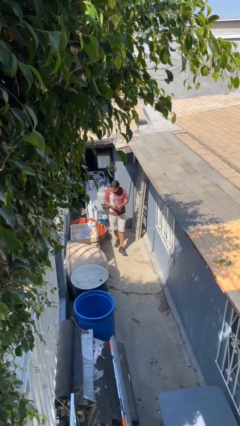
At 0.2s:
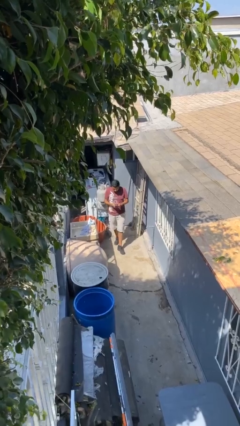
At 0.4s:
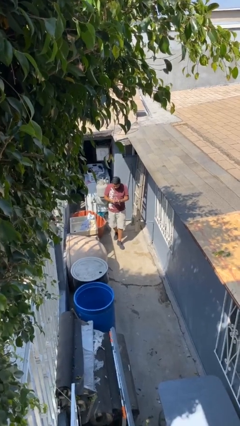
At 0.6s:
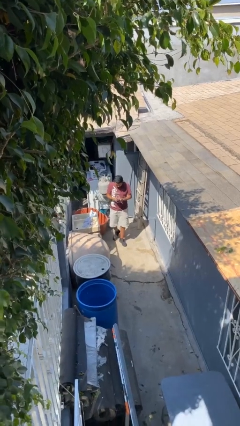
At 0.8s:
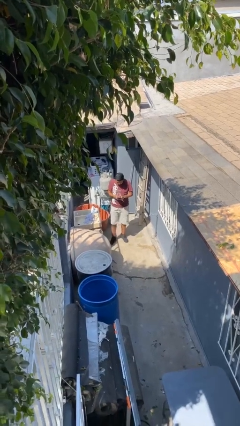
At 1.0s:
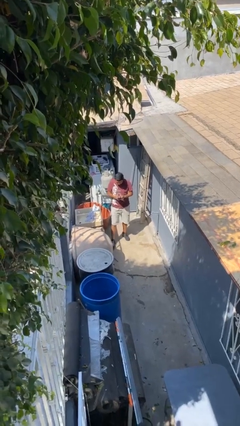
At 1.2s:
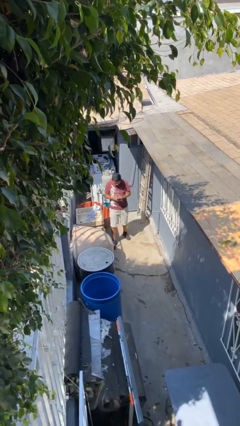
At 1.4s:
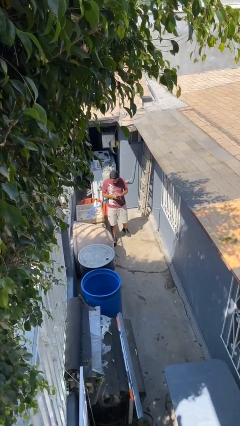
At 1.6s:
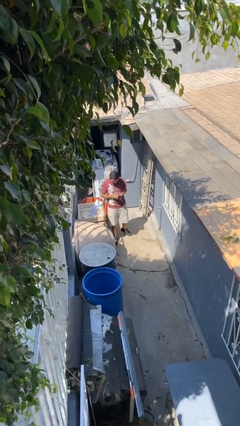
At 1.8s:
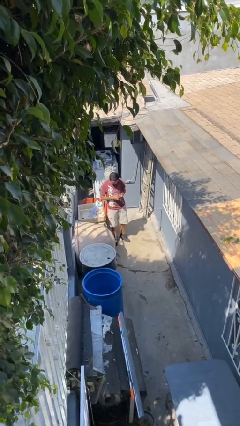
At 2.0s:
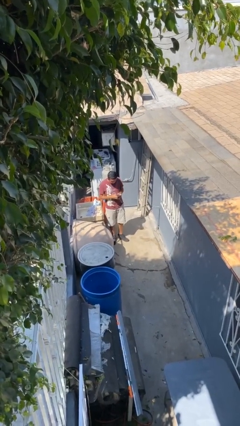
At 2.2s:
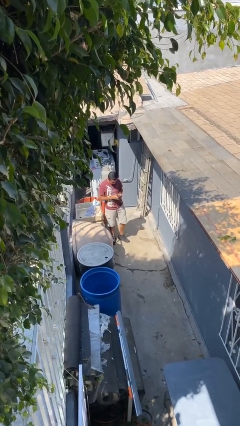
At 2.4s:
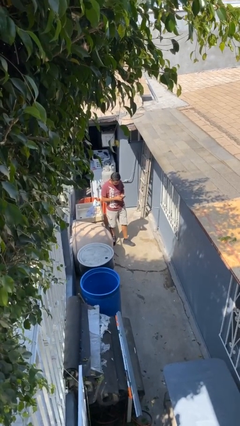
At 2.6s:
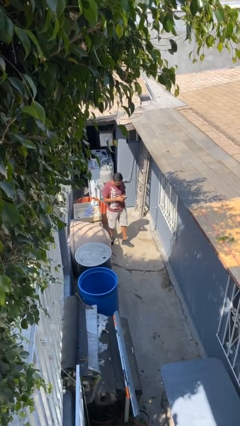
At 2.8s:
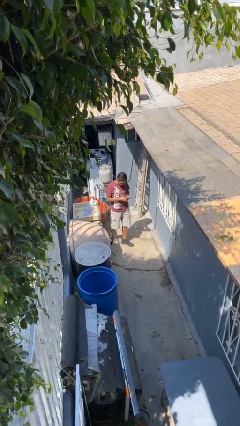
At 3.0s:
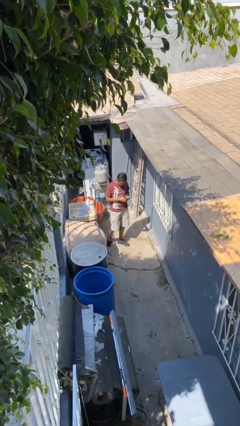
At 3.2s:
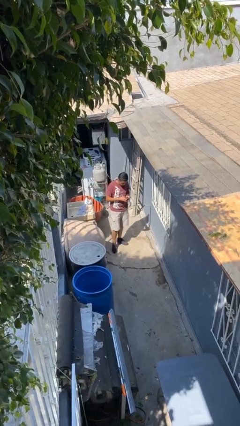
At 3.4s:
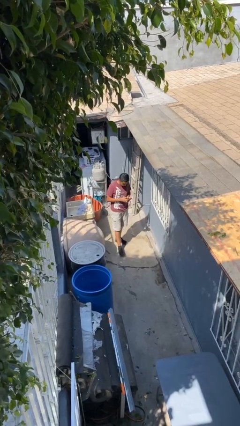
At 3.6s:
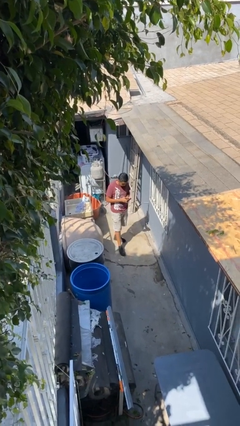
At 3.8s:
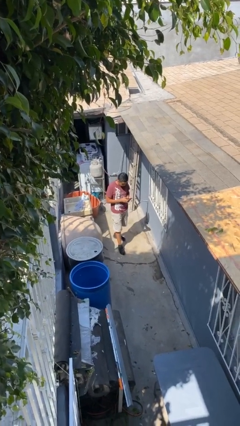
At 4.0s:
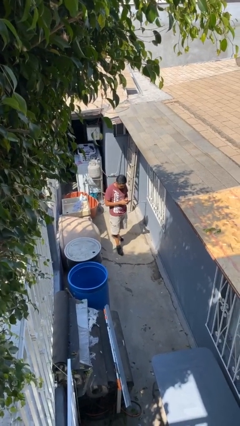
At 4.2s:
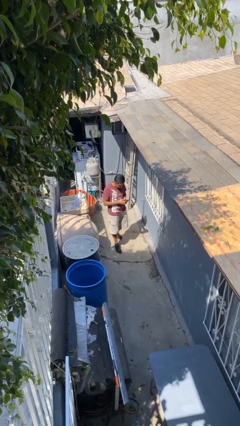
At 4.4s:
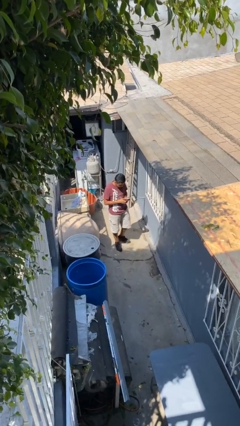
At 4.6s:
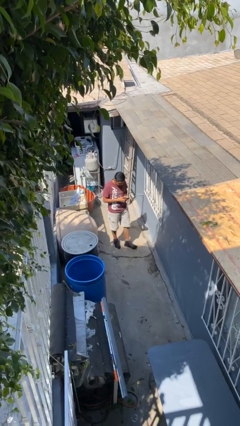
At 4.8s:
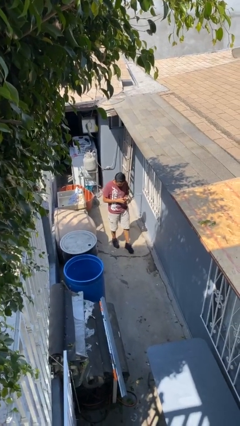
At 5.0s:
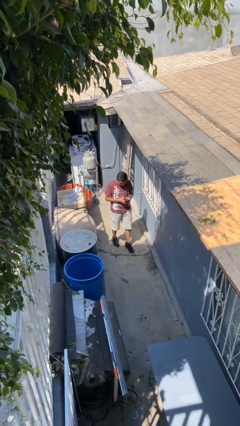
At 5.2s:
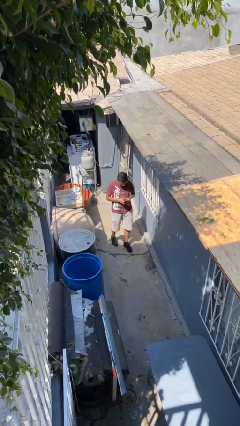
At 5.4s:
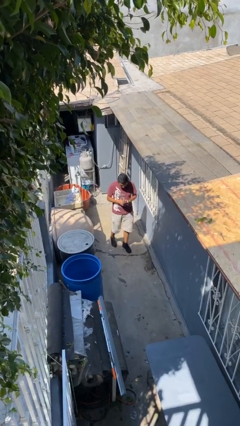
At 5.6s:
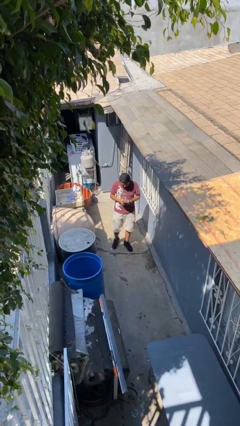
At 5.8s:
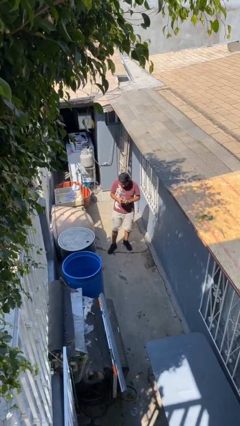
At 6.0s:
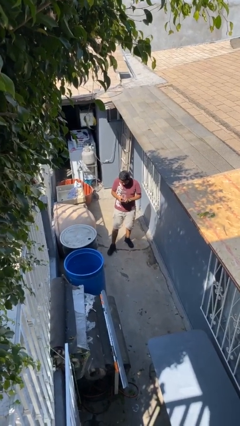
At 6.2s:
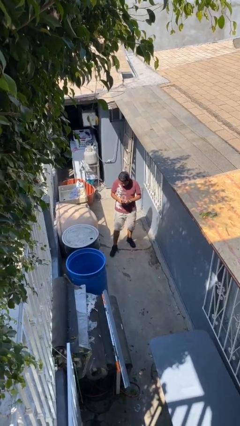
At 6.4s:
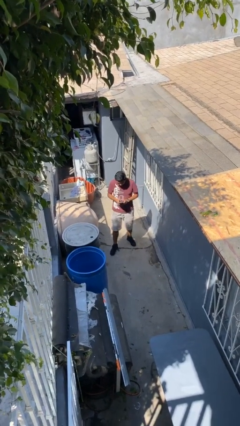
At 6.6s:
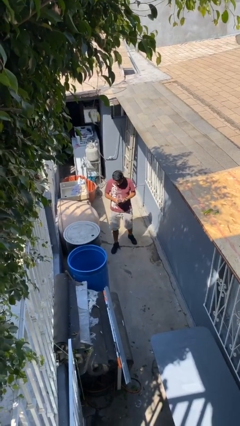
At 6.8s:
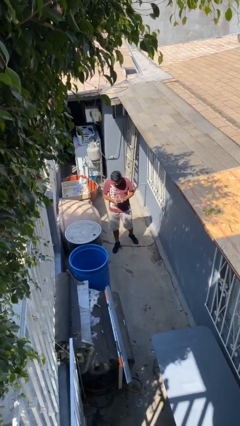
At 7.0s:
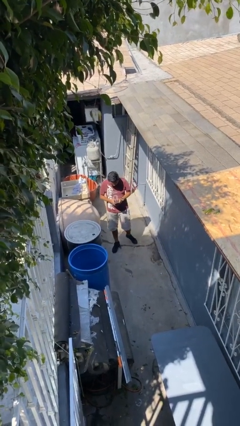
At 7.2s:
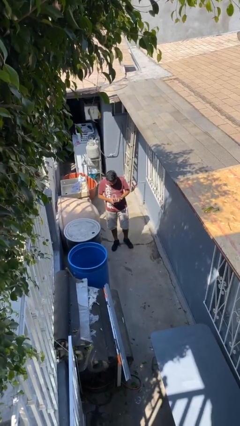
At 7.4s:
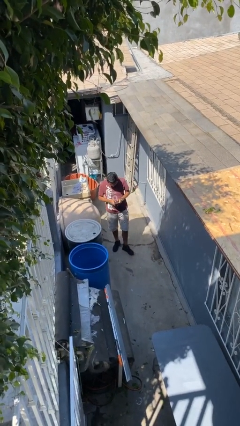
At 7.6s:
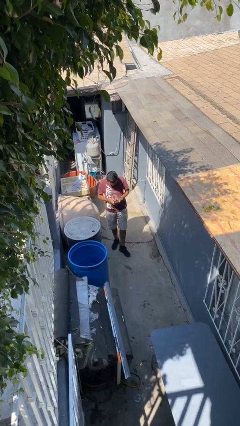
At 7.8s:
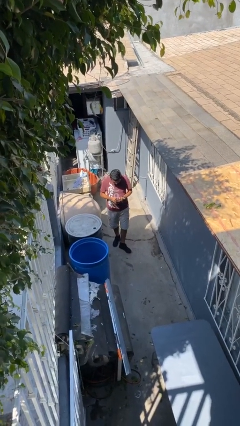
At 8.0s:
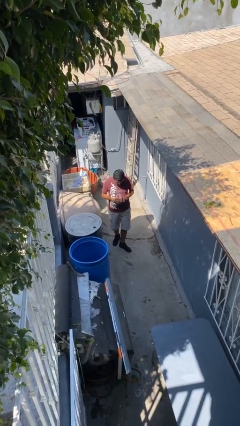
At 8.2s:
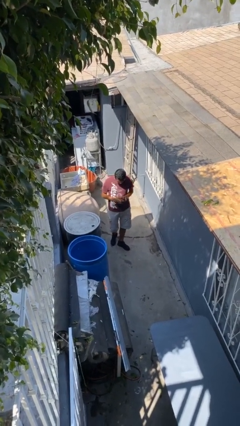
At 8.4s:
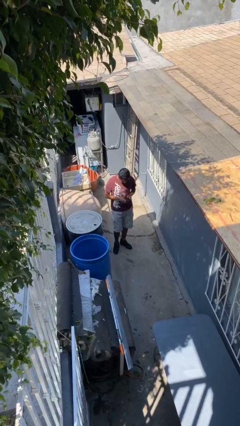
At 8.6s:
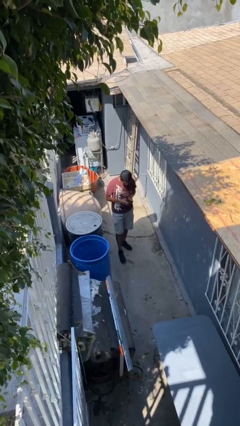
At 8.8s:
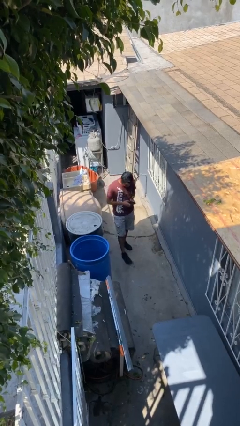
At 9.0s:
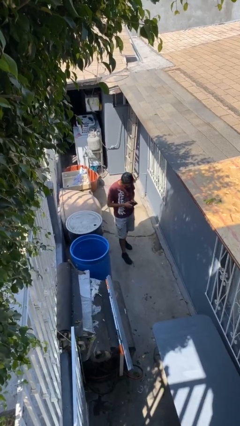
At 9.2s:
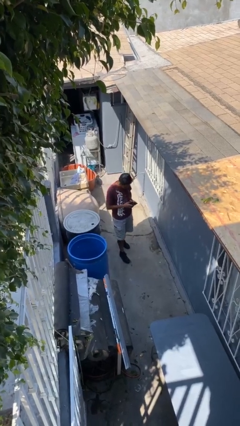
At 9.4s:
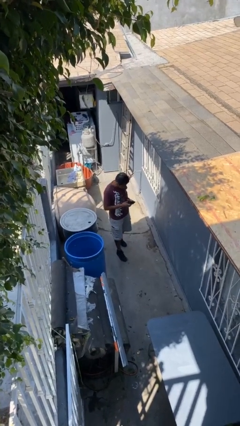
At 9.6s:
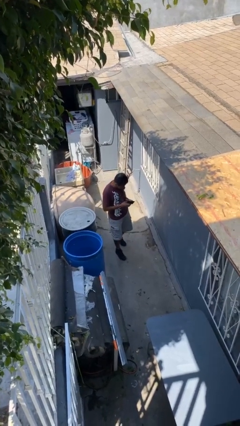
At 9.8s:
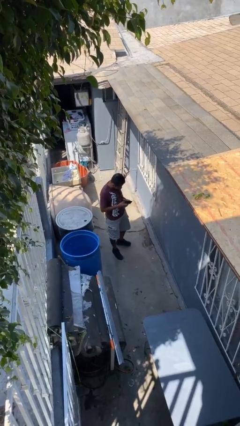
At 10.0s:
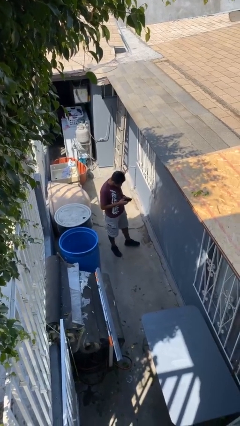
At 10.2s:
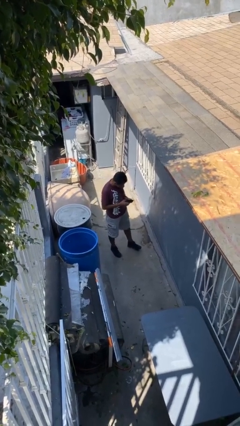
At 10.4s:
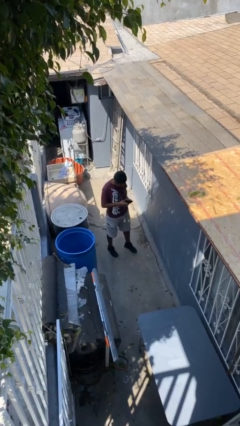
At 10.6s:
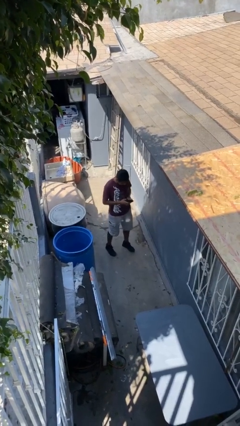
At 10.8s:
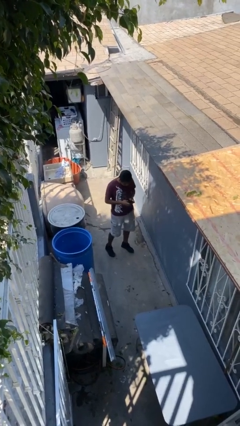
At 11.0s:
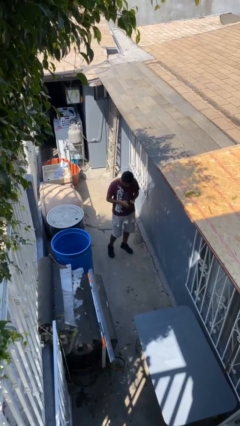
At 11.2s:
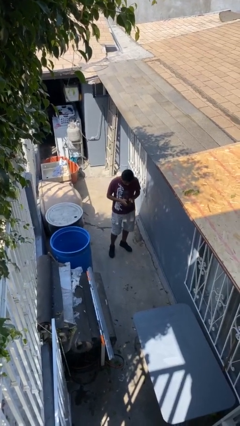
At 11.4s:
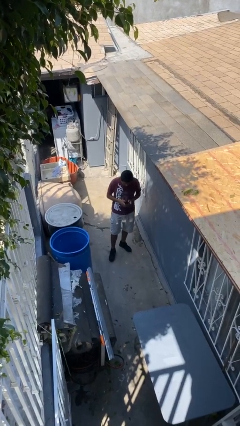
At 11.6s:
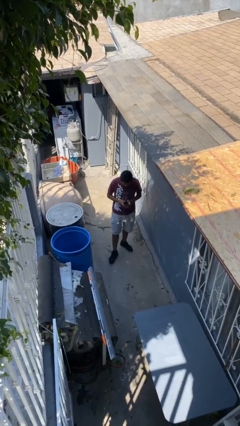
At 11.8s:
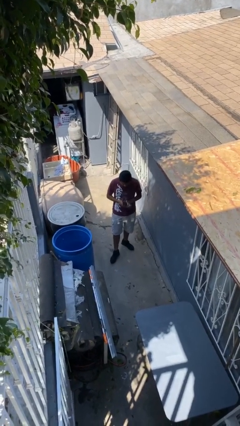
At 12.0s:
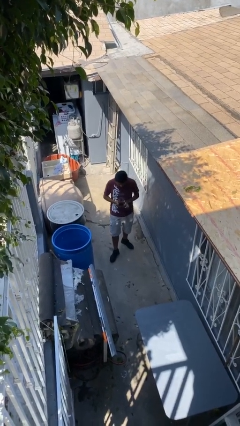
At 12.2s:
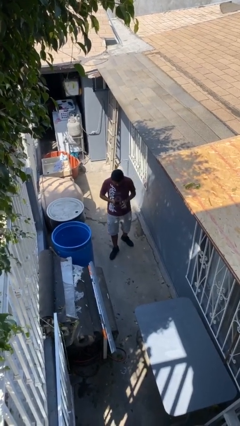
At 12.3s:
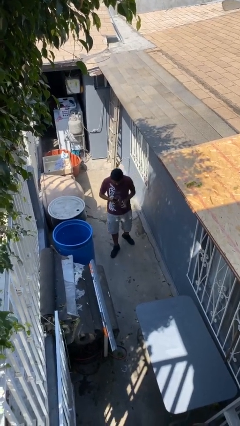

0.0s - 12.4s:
person texts on phone

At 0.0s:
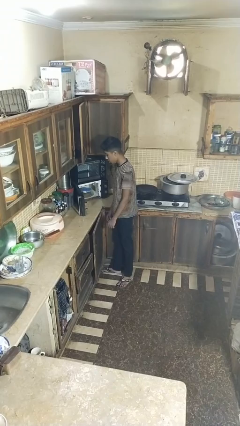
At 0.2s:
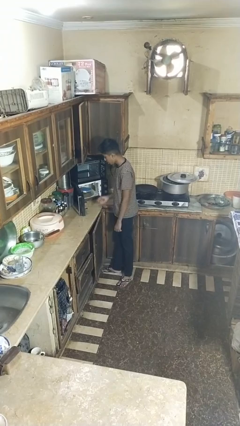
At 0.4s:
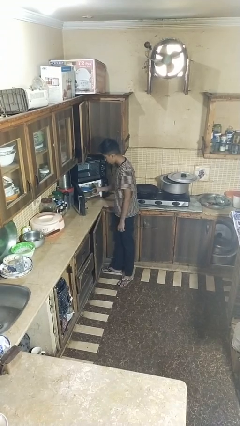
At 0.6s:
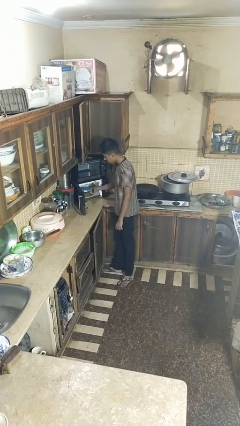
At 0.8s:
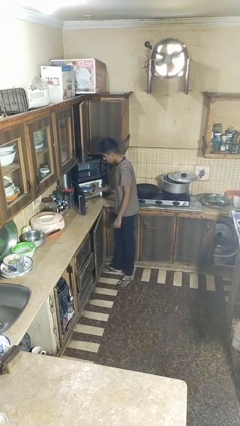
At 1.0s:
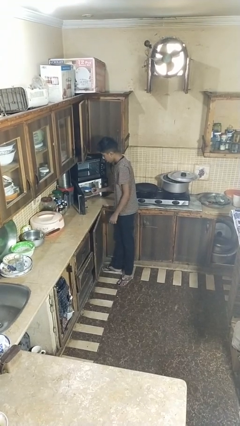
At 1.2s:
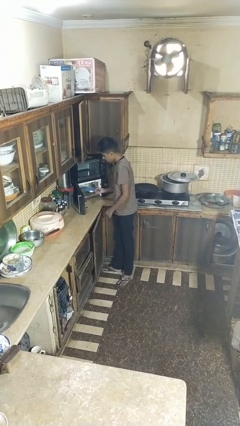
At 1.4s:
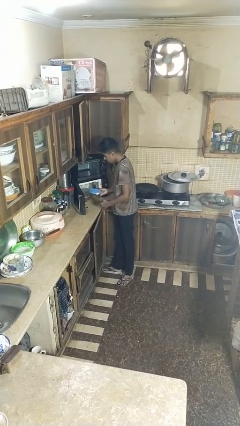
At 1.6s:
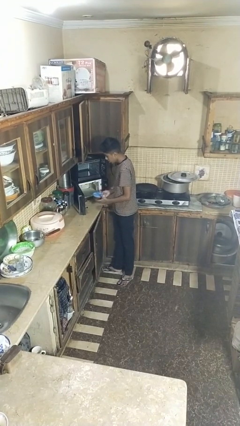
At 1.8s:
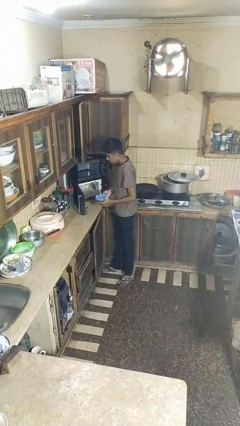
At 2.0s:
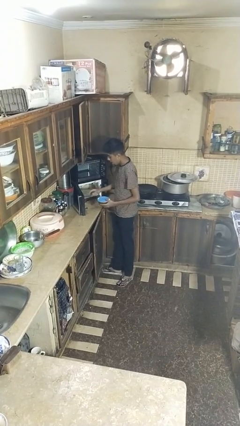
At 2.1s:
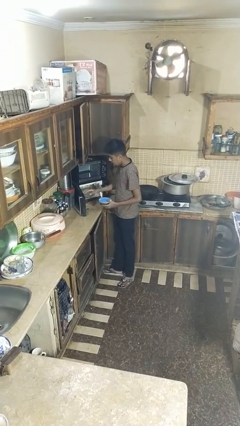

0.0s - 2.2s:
person takes object from microwave

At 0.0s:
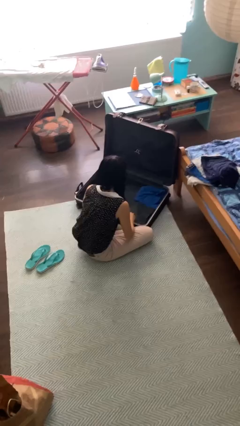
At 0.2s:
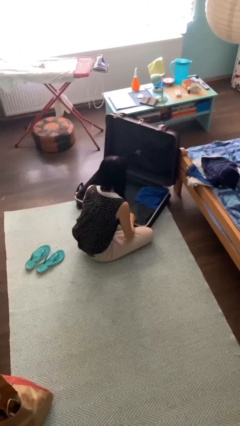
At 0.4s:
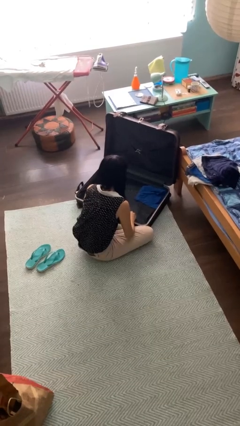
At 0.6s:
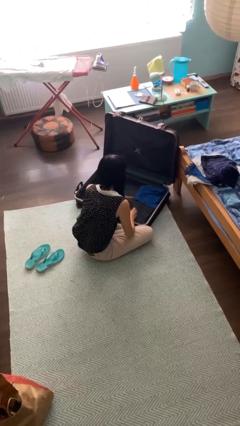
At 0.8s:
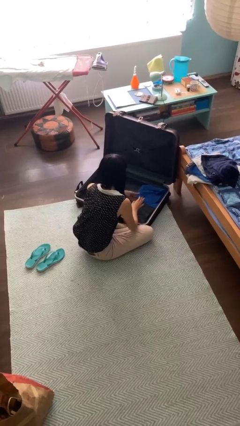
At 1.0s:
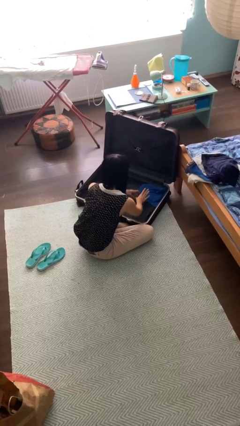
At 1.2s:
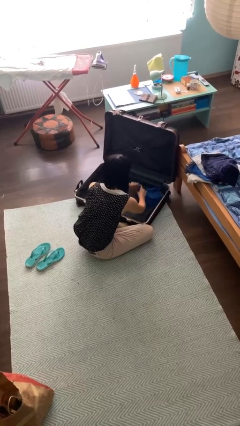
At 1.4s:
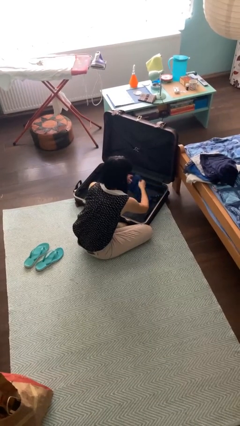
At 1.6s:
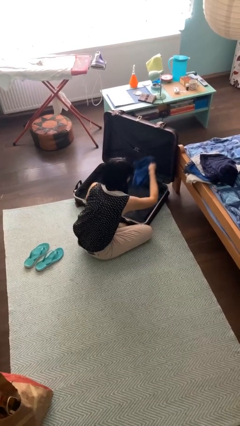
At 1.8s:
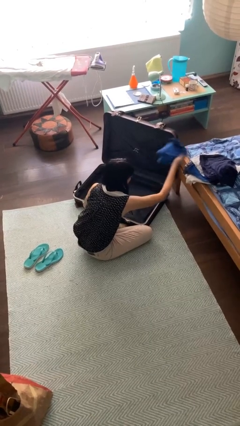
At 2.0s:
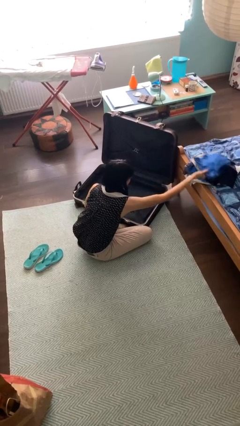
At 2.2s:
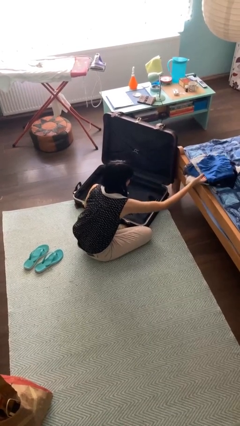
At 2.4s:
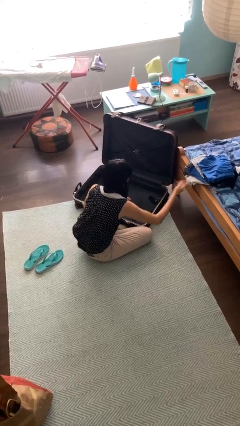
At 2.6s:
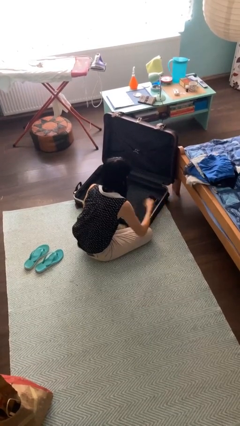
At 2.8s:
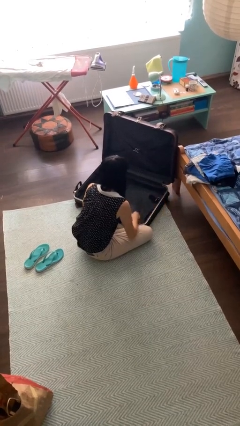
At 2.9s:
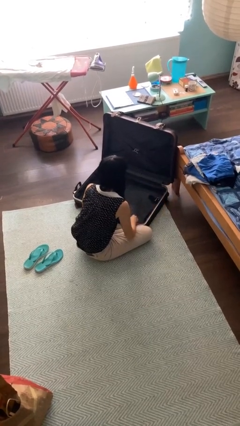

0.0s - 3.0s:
person unloads clothes from suitcase

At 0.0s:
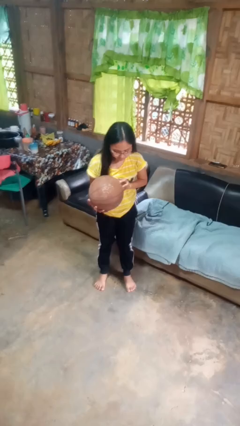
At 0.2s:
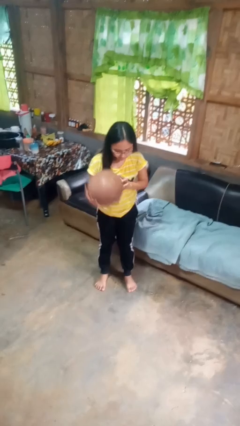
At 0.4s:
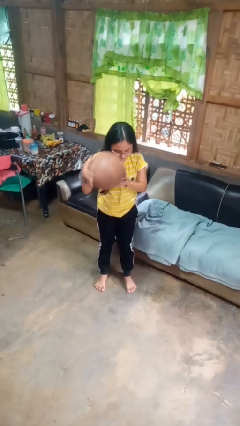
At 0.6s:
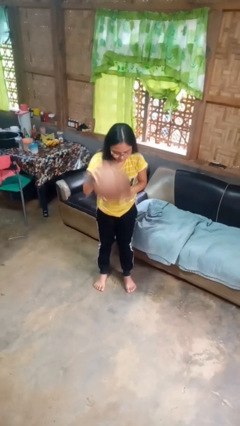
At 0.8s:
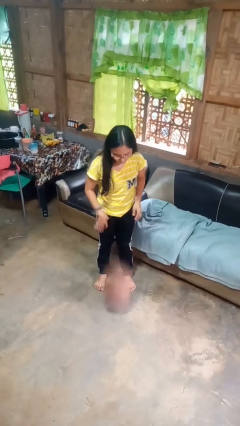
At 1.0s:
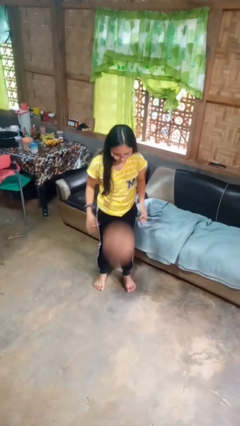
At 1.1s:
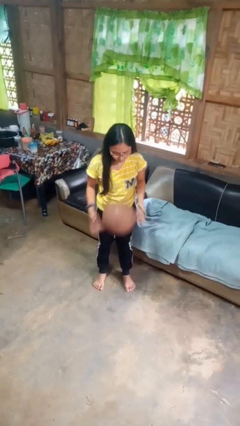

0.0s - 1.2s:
person bounces ball on floor
